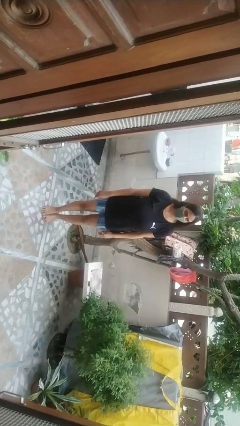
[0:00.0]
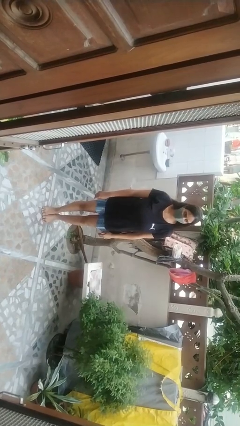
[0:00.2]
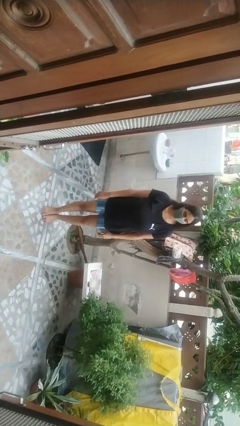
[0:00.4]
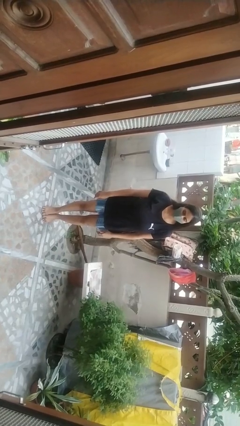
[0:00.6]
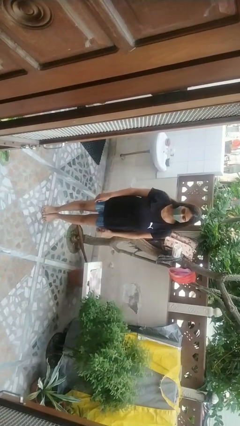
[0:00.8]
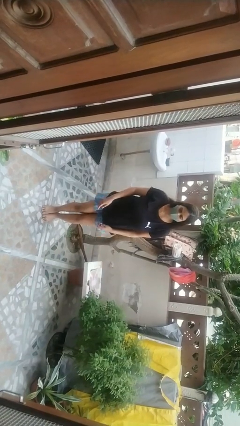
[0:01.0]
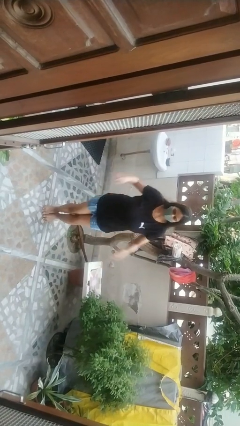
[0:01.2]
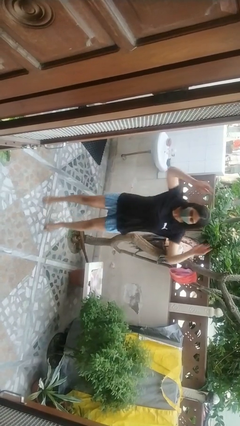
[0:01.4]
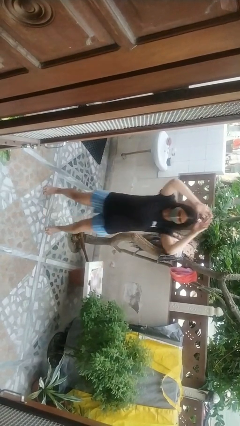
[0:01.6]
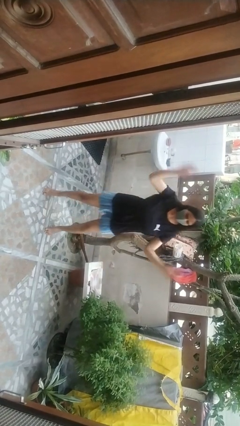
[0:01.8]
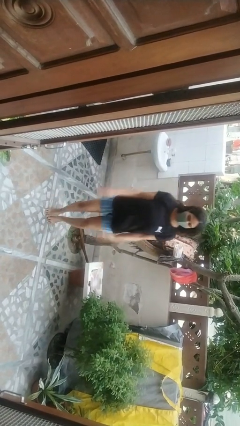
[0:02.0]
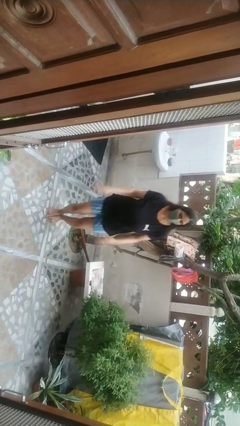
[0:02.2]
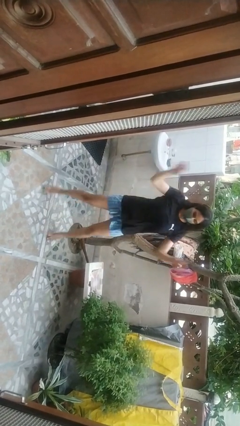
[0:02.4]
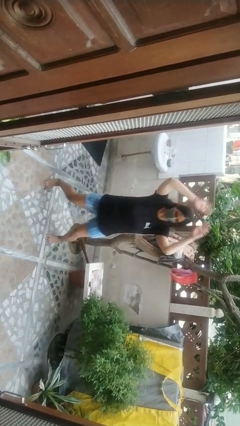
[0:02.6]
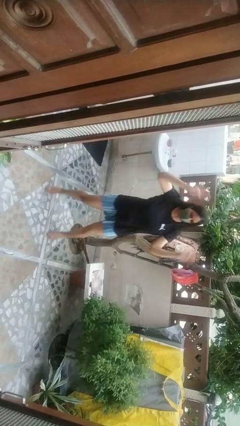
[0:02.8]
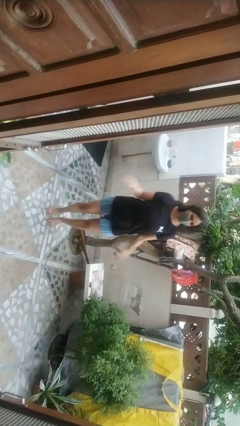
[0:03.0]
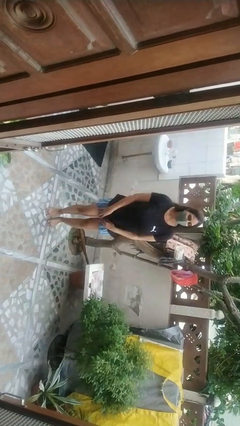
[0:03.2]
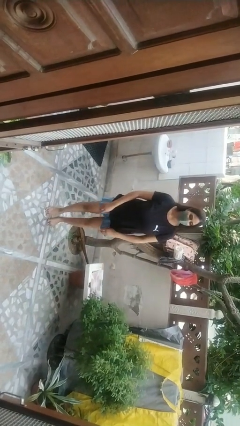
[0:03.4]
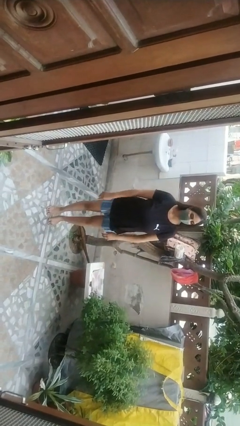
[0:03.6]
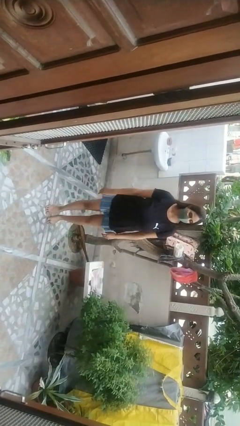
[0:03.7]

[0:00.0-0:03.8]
person exercises with jumping jacks

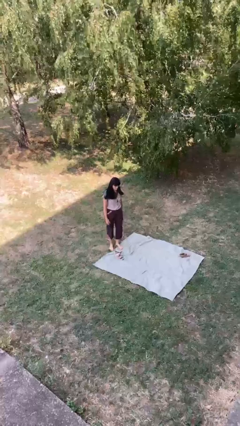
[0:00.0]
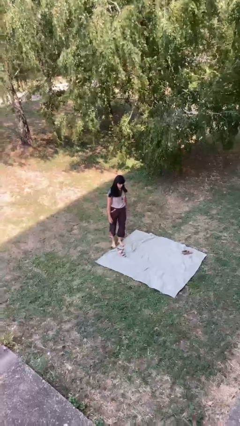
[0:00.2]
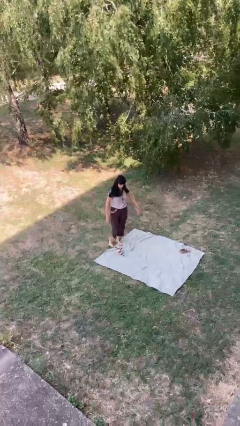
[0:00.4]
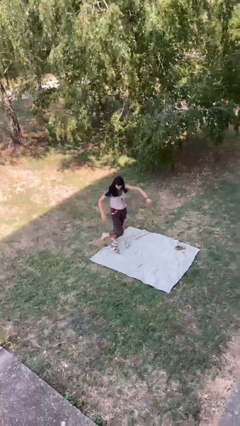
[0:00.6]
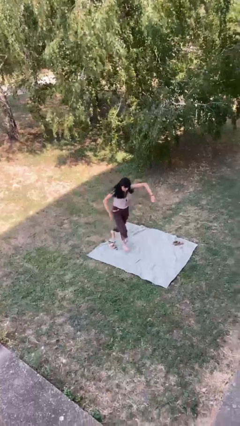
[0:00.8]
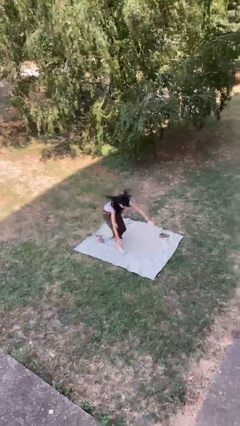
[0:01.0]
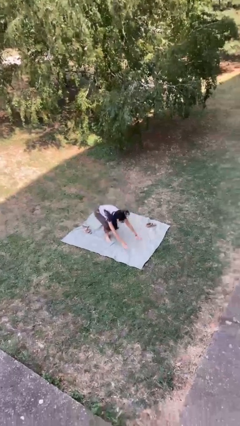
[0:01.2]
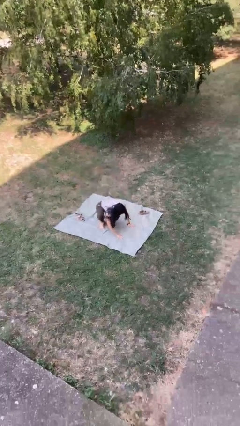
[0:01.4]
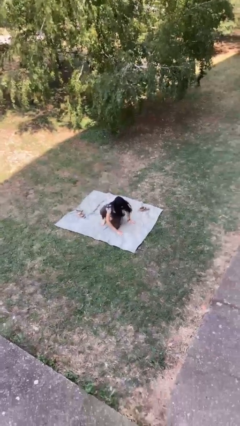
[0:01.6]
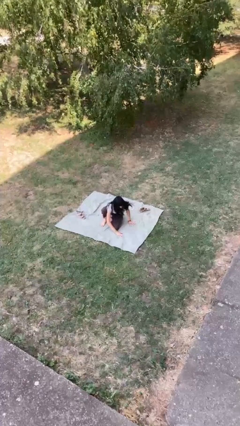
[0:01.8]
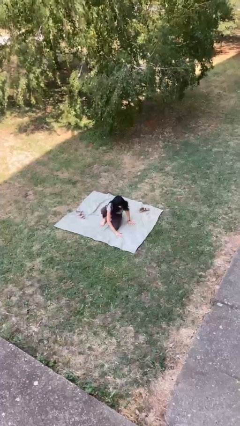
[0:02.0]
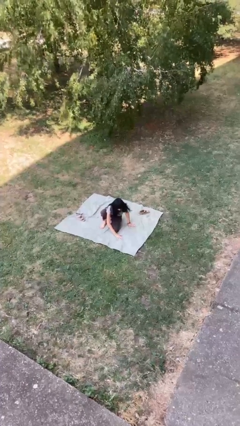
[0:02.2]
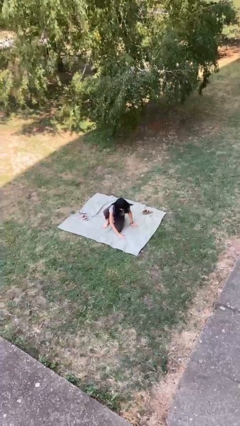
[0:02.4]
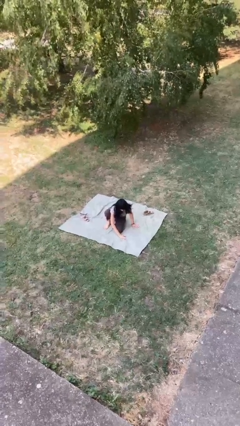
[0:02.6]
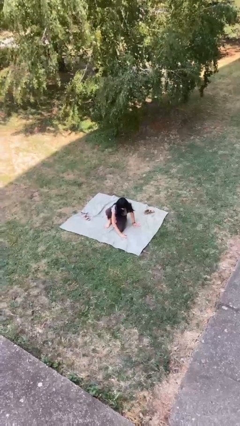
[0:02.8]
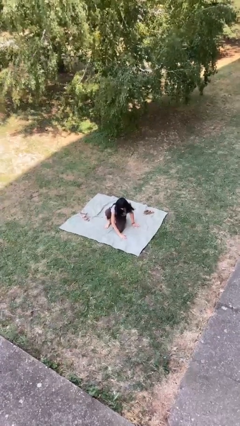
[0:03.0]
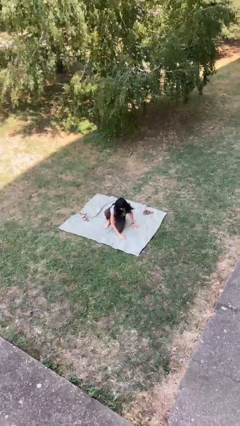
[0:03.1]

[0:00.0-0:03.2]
person trips on object on floor

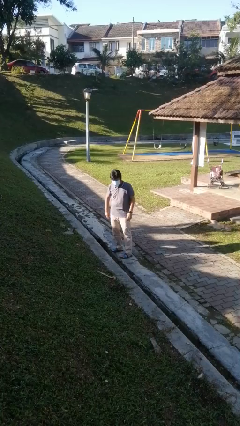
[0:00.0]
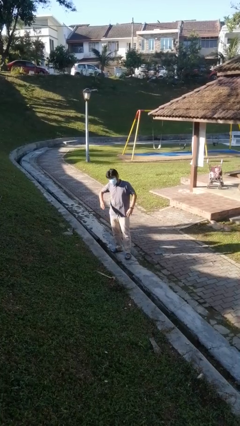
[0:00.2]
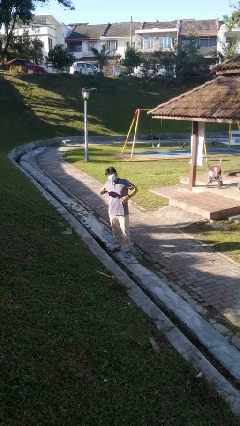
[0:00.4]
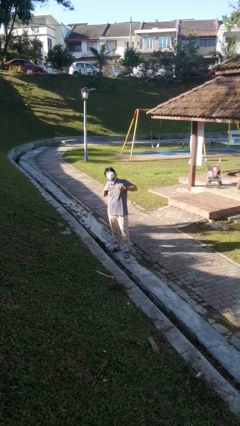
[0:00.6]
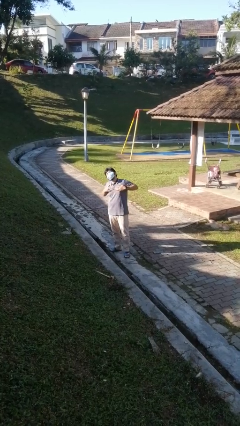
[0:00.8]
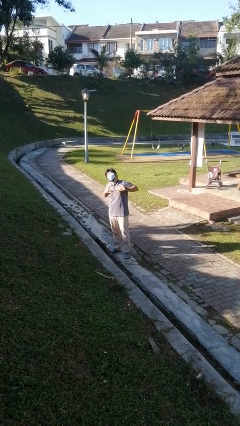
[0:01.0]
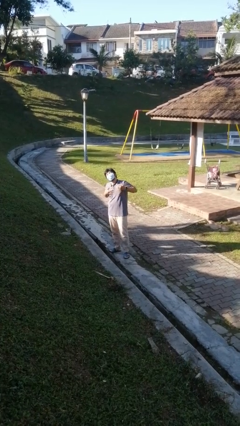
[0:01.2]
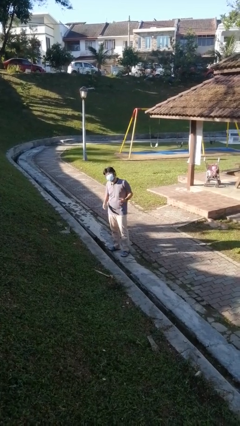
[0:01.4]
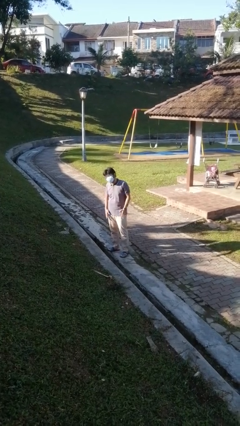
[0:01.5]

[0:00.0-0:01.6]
person drums on chest

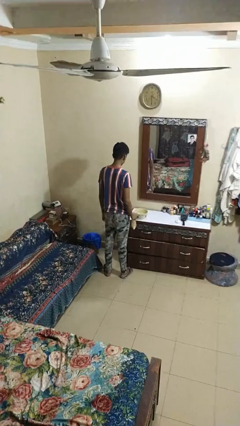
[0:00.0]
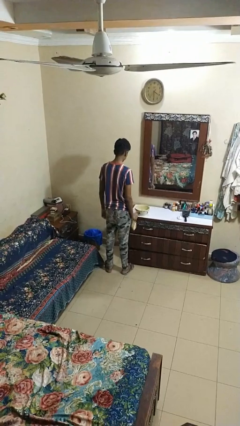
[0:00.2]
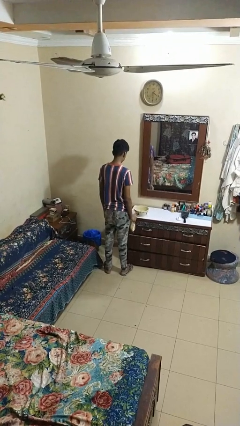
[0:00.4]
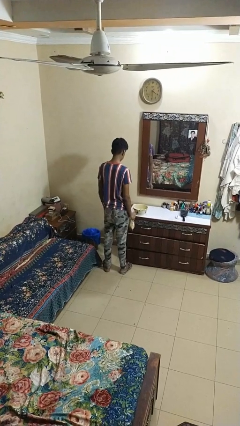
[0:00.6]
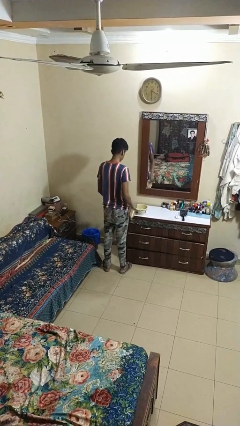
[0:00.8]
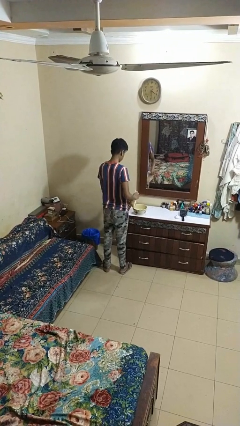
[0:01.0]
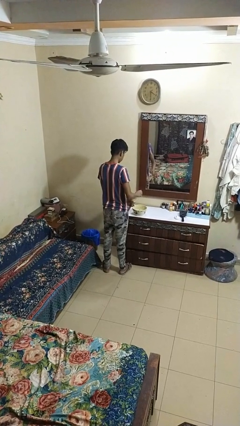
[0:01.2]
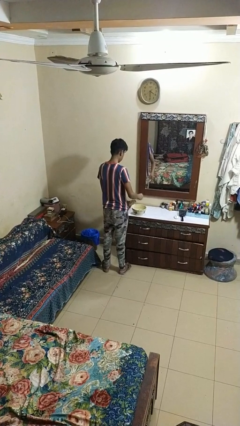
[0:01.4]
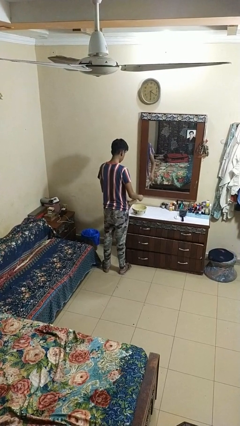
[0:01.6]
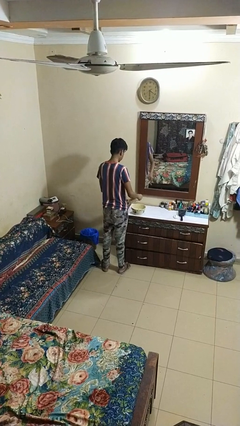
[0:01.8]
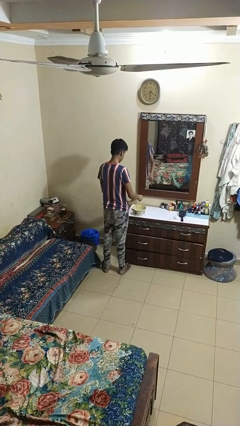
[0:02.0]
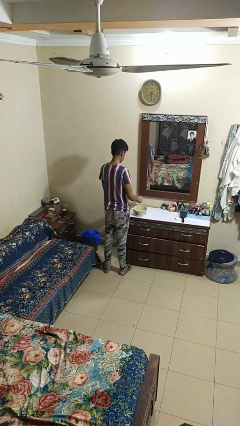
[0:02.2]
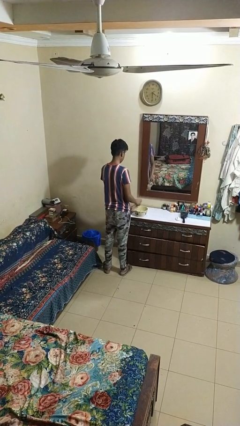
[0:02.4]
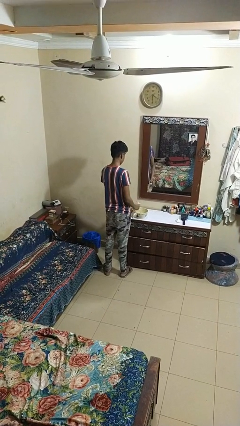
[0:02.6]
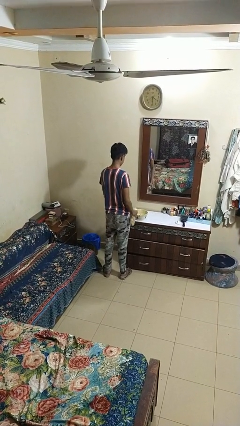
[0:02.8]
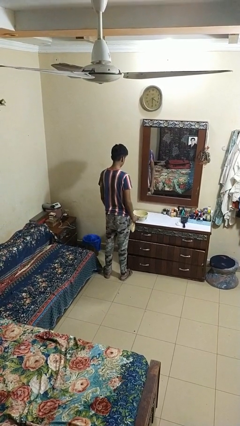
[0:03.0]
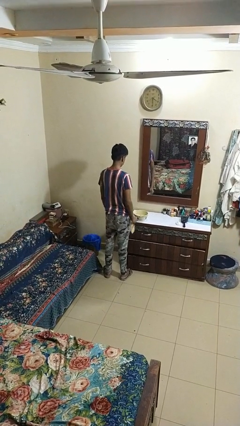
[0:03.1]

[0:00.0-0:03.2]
person pours into bowl

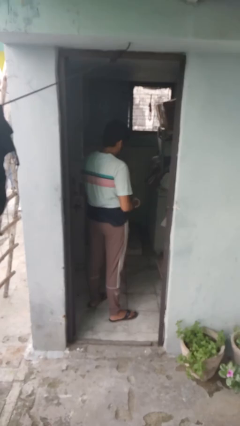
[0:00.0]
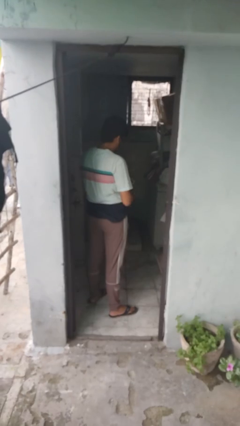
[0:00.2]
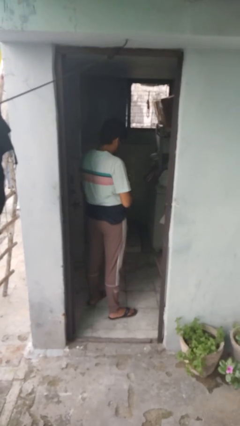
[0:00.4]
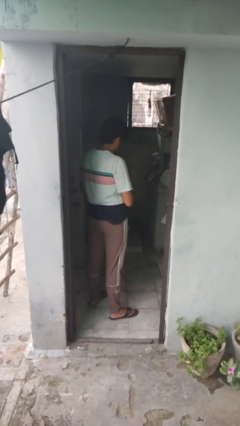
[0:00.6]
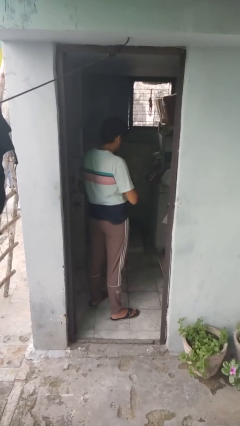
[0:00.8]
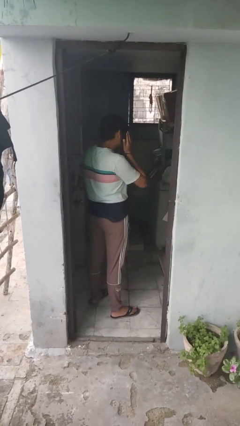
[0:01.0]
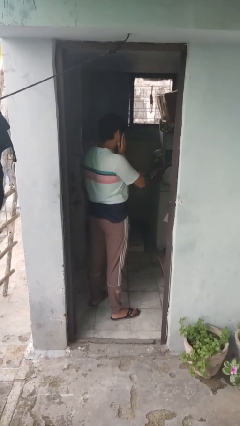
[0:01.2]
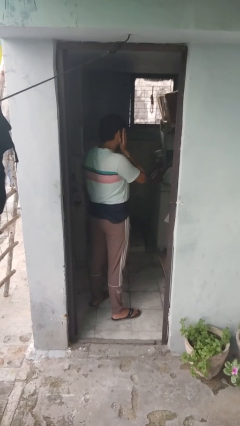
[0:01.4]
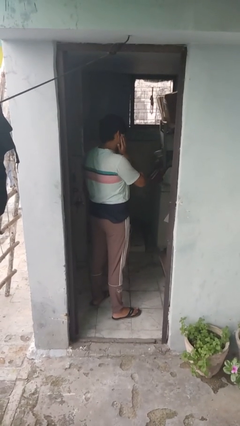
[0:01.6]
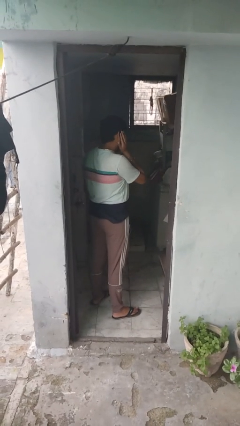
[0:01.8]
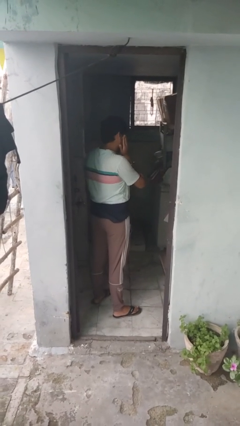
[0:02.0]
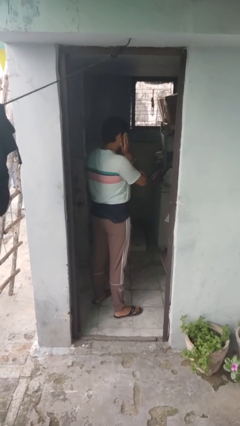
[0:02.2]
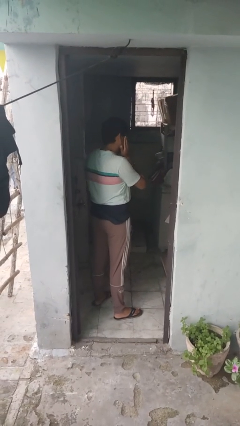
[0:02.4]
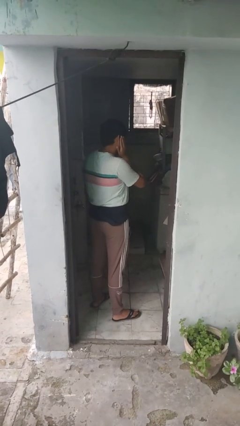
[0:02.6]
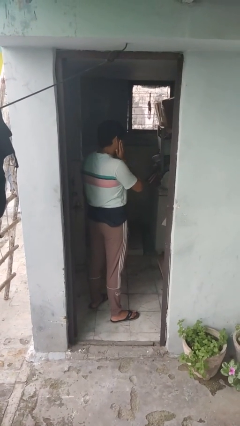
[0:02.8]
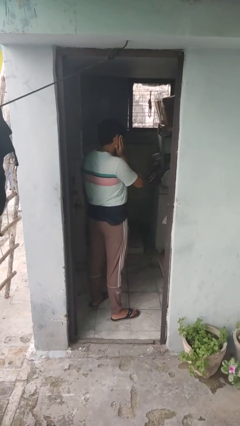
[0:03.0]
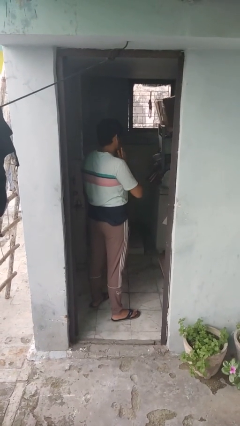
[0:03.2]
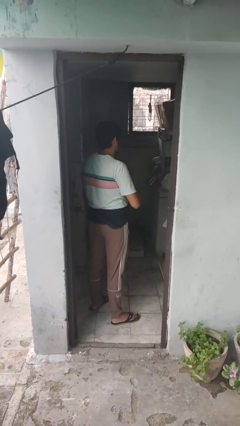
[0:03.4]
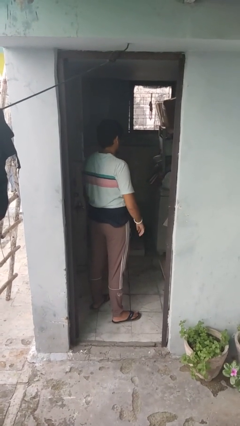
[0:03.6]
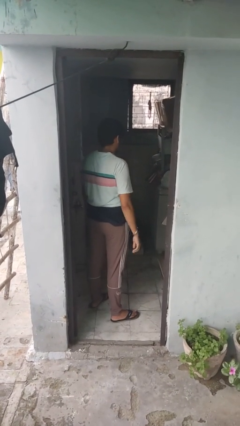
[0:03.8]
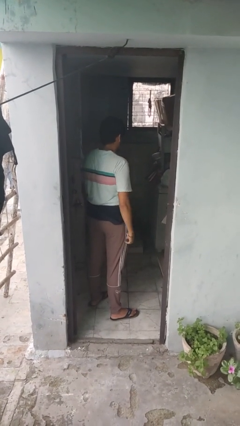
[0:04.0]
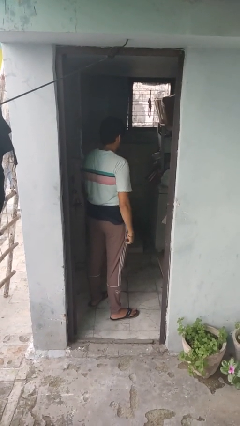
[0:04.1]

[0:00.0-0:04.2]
person applies shaving cream

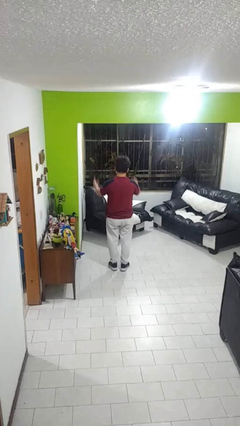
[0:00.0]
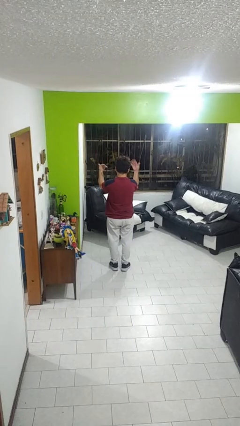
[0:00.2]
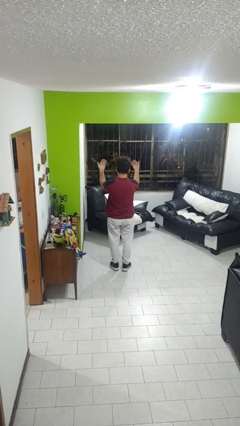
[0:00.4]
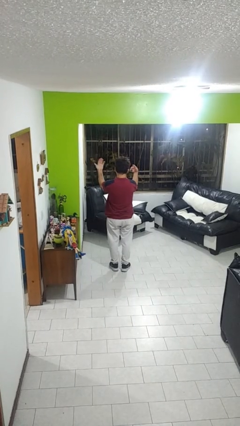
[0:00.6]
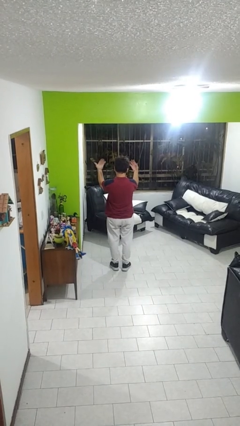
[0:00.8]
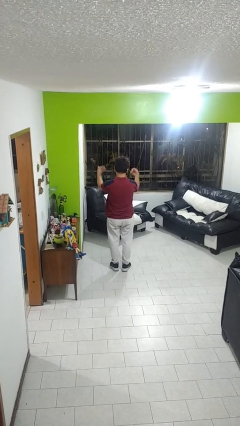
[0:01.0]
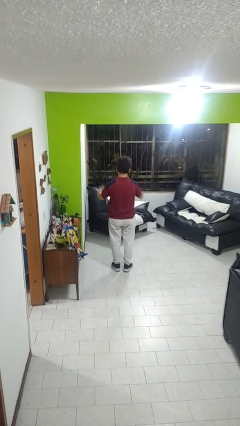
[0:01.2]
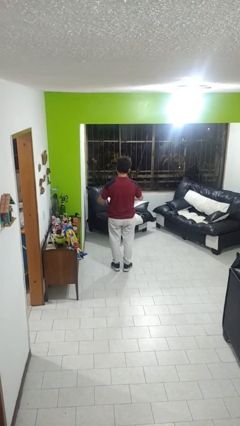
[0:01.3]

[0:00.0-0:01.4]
person gestures come here
